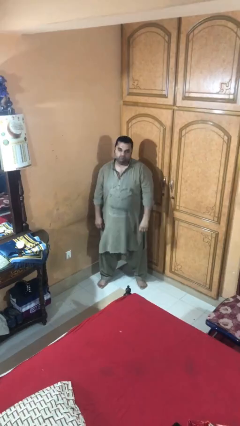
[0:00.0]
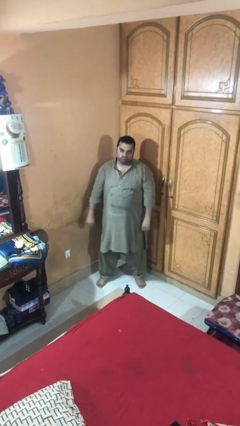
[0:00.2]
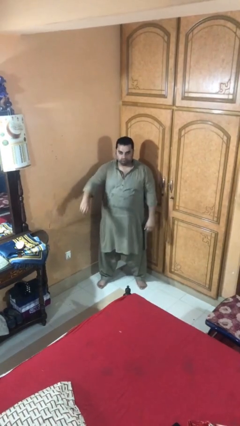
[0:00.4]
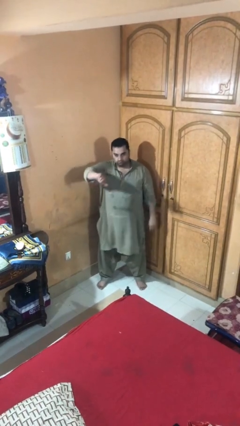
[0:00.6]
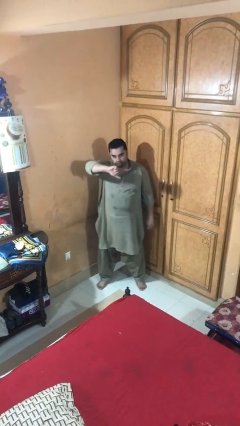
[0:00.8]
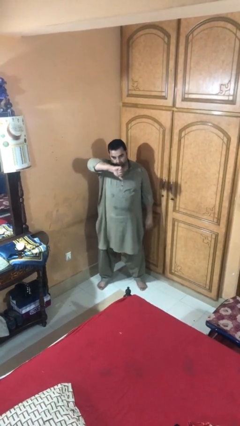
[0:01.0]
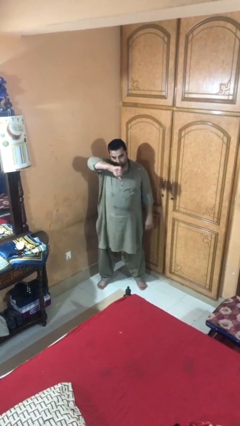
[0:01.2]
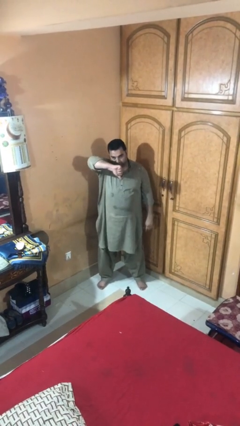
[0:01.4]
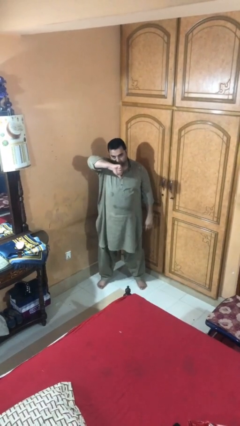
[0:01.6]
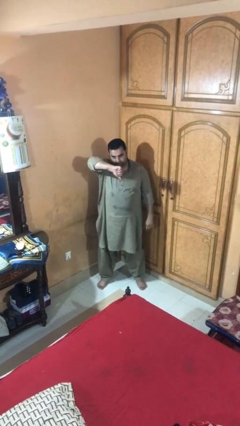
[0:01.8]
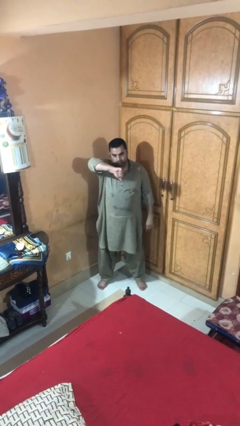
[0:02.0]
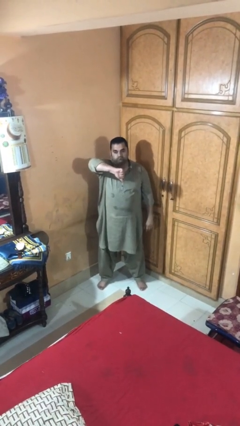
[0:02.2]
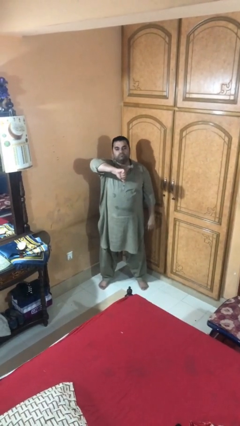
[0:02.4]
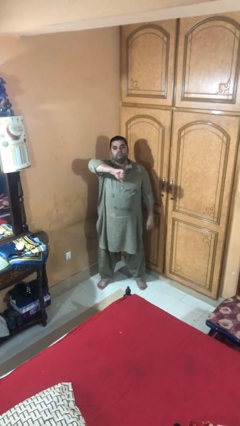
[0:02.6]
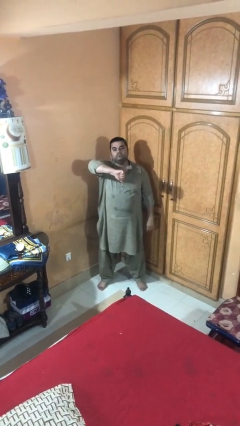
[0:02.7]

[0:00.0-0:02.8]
person gestures thumbs down

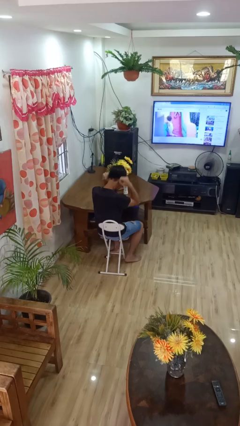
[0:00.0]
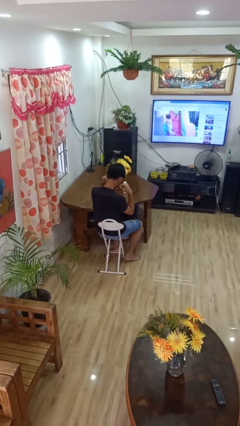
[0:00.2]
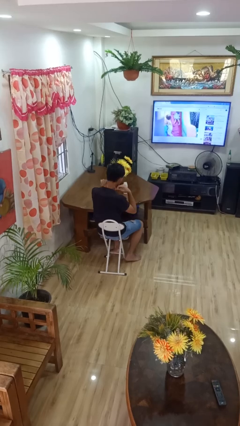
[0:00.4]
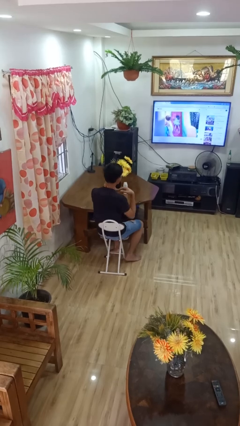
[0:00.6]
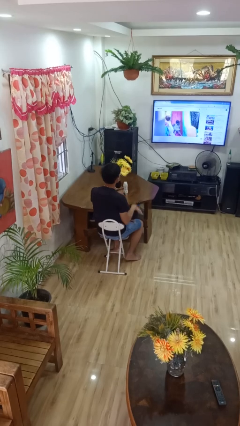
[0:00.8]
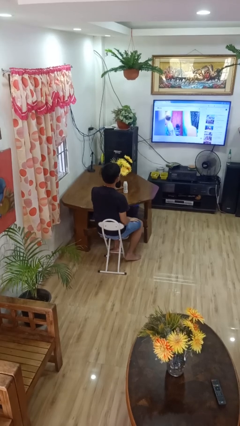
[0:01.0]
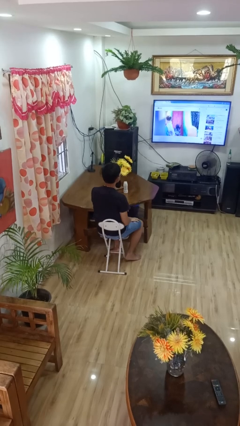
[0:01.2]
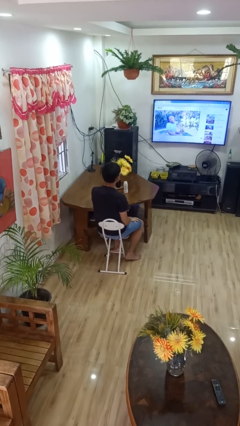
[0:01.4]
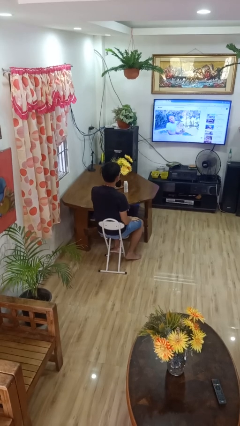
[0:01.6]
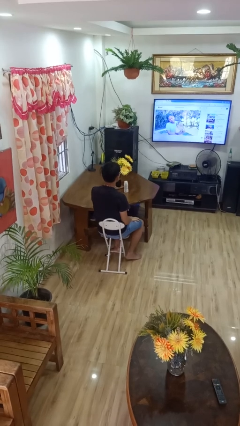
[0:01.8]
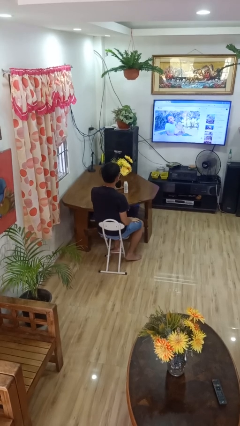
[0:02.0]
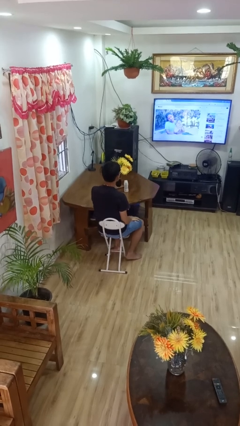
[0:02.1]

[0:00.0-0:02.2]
person puts on necklace

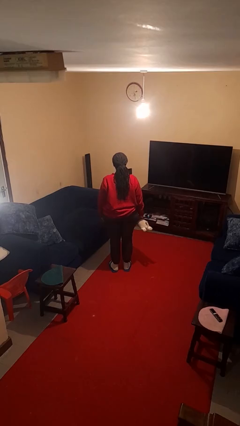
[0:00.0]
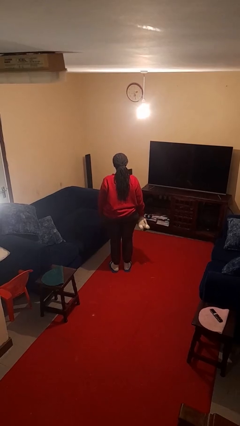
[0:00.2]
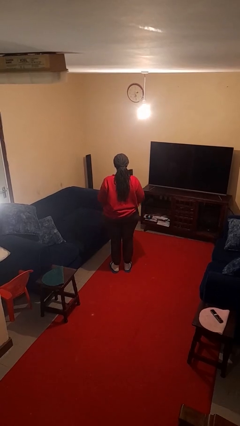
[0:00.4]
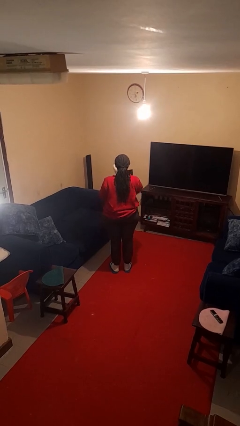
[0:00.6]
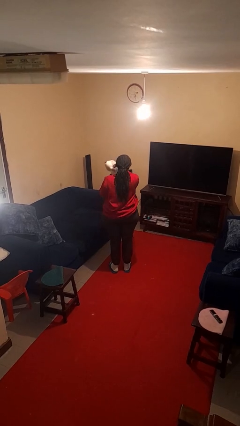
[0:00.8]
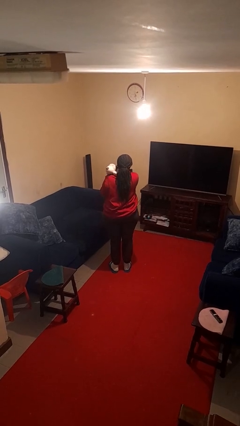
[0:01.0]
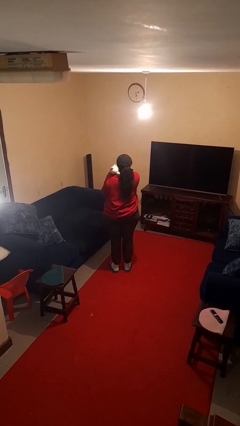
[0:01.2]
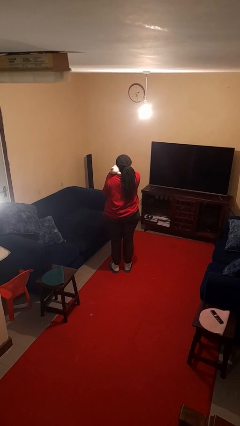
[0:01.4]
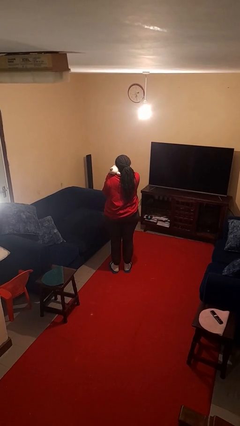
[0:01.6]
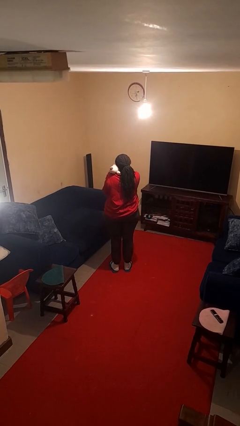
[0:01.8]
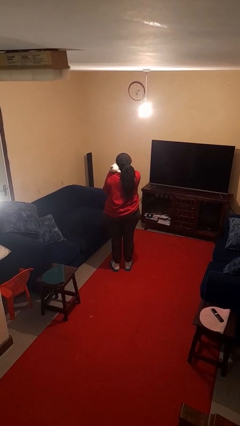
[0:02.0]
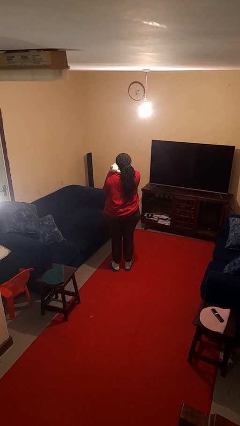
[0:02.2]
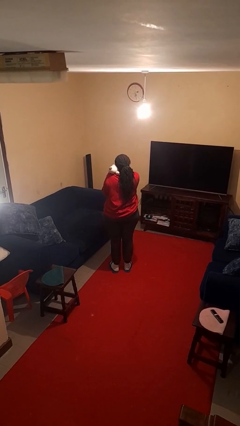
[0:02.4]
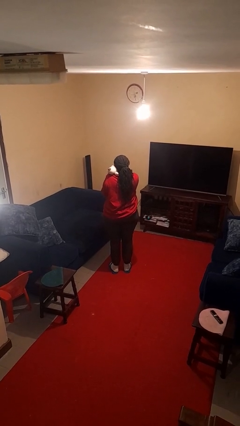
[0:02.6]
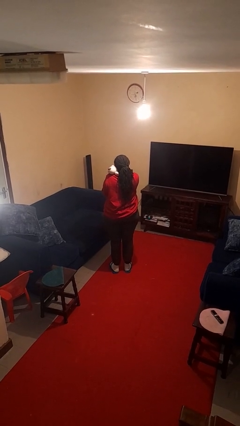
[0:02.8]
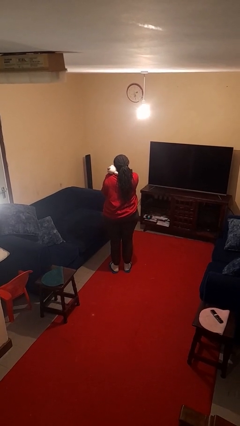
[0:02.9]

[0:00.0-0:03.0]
person hugs stuffed animal

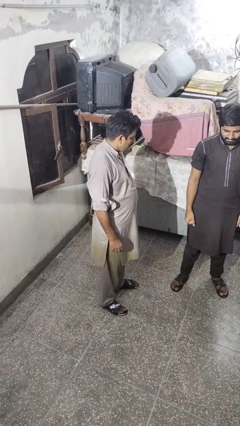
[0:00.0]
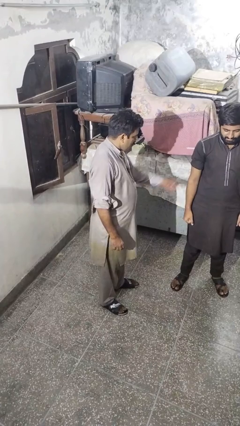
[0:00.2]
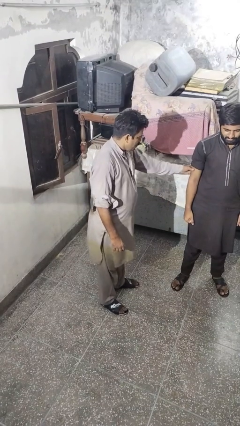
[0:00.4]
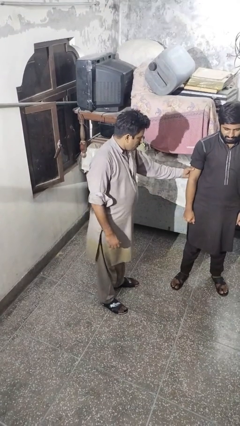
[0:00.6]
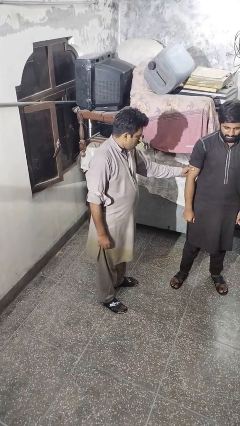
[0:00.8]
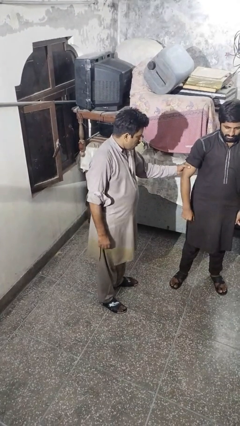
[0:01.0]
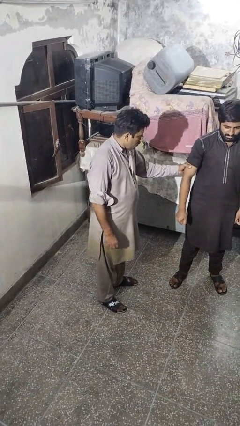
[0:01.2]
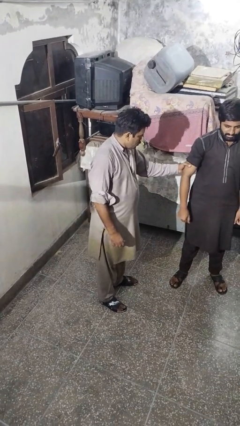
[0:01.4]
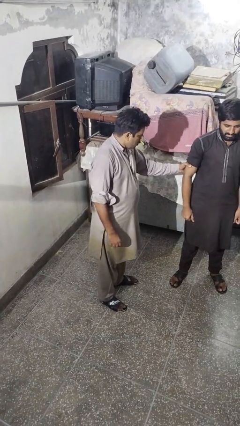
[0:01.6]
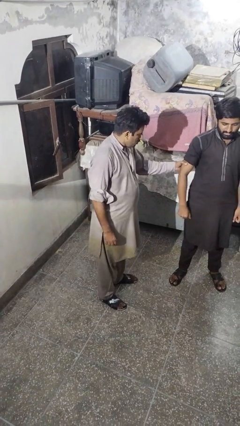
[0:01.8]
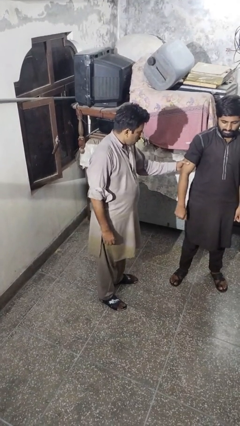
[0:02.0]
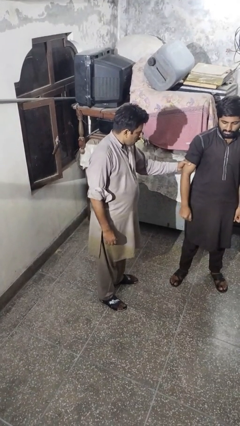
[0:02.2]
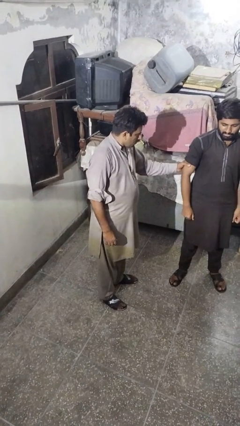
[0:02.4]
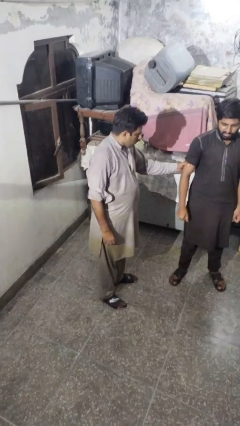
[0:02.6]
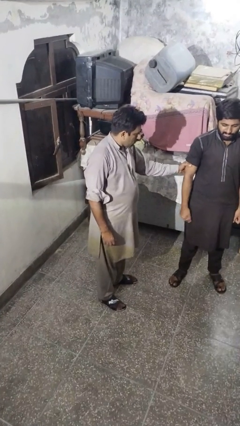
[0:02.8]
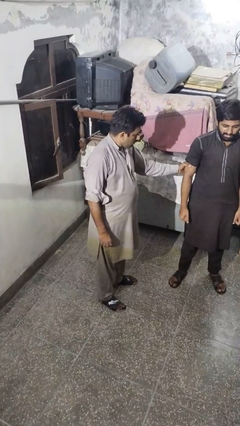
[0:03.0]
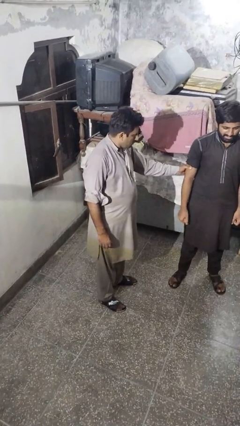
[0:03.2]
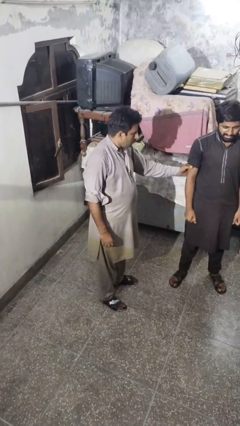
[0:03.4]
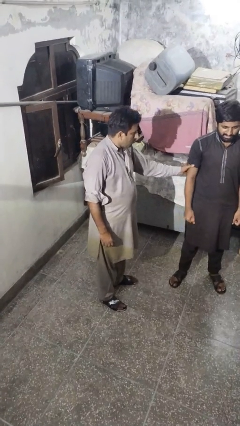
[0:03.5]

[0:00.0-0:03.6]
person grabs person by bicep

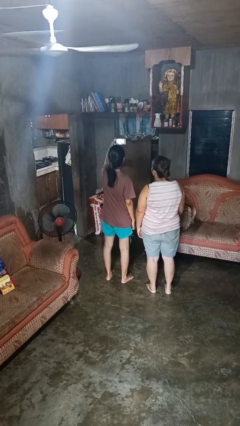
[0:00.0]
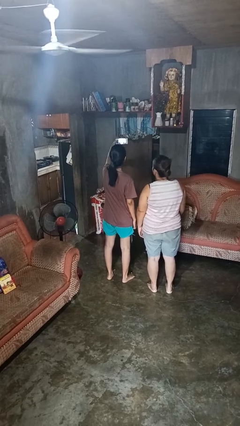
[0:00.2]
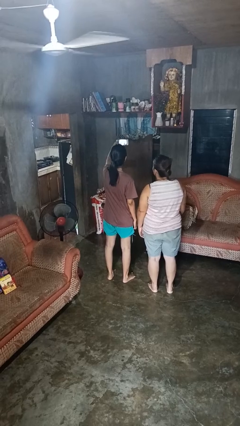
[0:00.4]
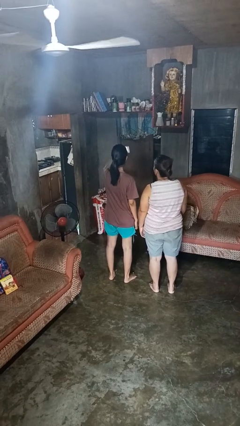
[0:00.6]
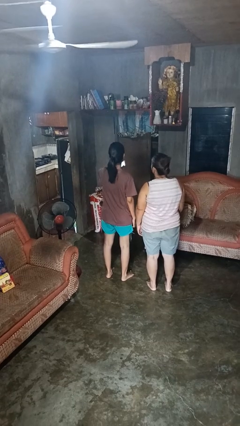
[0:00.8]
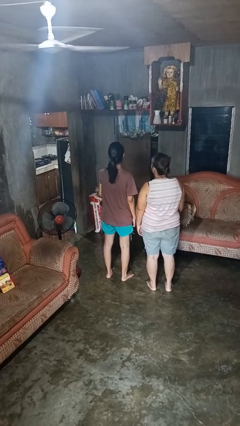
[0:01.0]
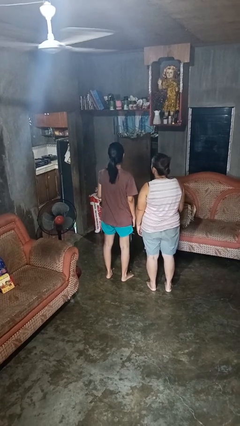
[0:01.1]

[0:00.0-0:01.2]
person takes selfie with person

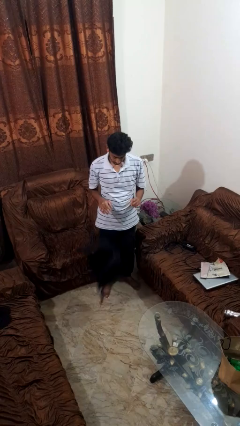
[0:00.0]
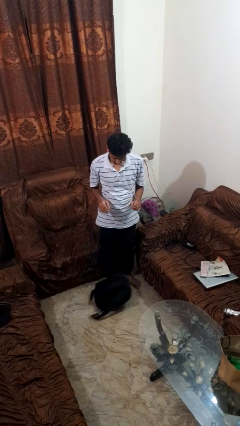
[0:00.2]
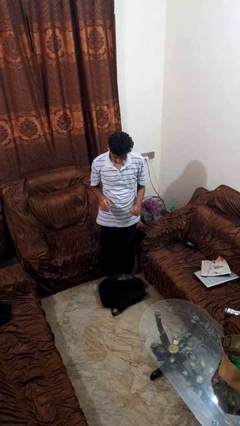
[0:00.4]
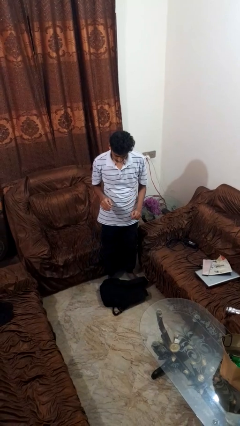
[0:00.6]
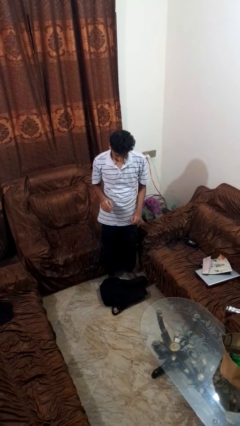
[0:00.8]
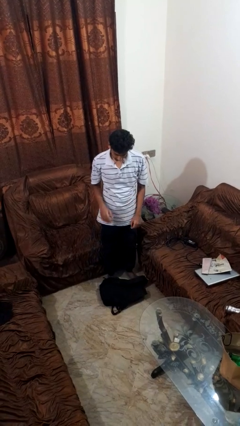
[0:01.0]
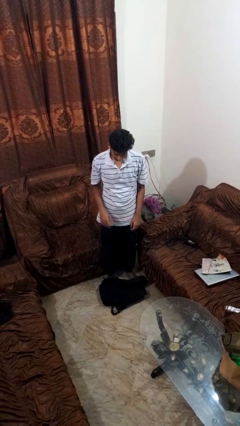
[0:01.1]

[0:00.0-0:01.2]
person drops object

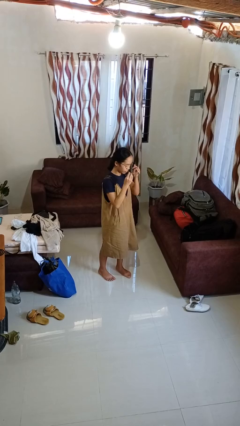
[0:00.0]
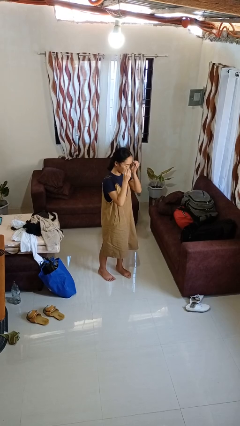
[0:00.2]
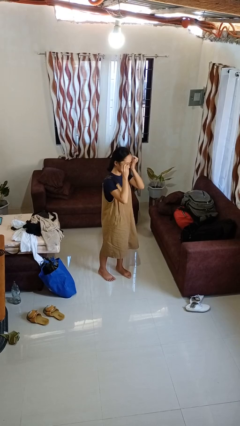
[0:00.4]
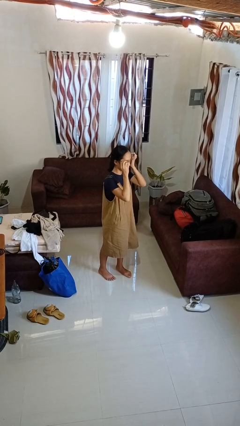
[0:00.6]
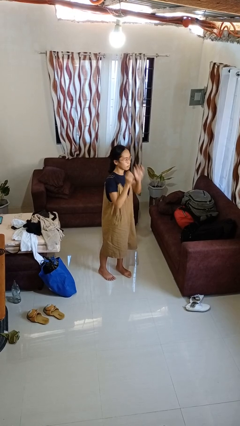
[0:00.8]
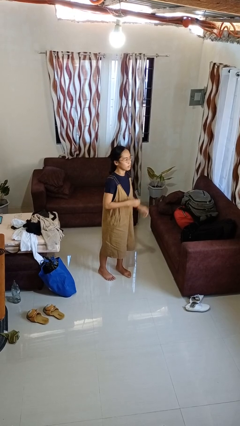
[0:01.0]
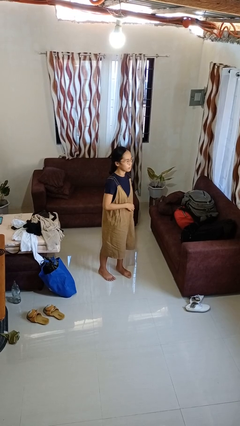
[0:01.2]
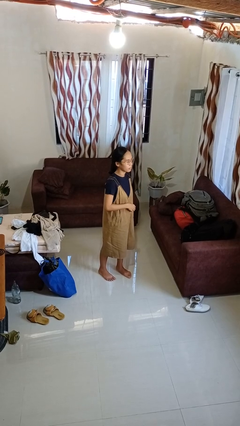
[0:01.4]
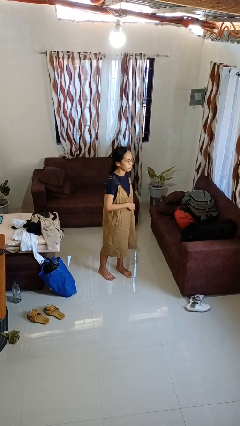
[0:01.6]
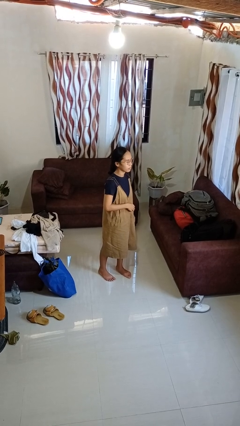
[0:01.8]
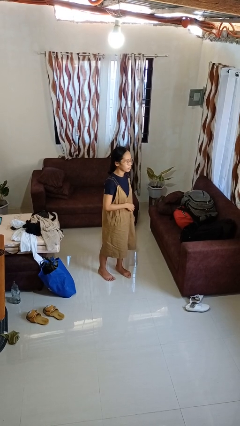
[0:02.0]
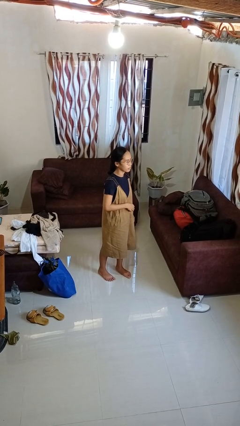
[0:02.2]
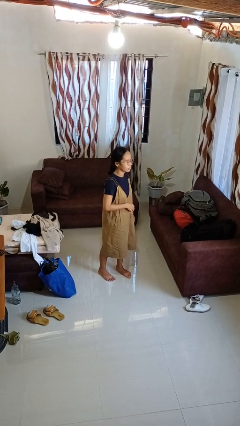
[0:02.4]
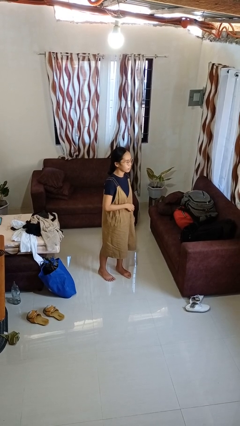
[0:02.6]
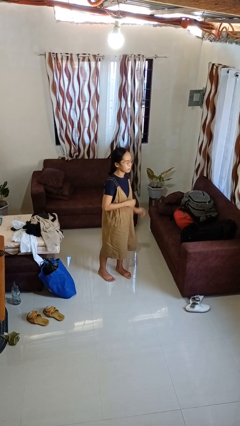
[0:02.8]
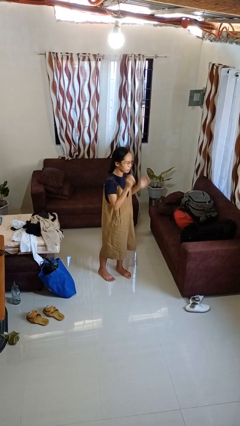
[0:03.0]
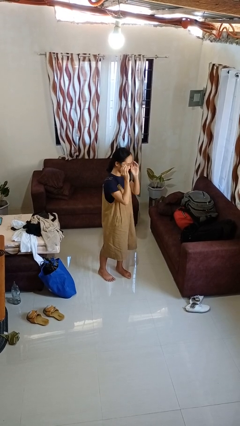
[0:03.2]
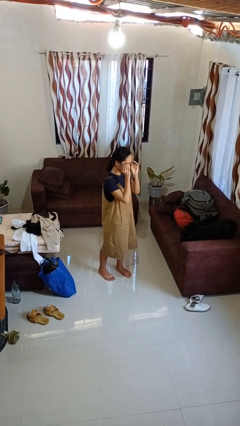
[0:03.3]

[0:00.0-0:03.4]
person puts on glasses
